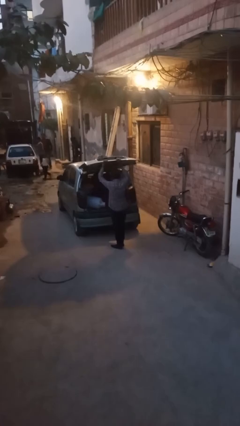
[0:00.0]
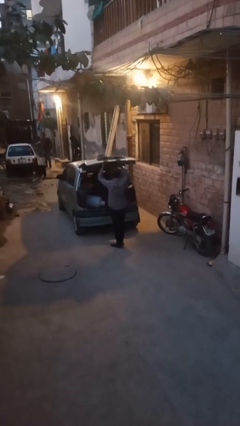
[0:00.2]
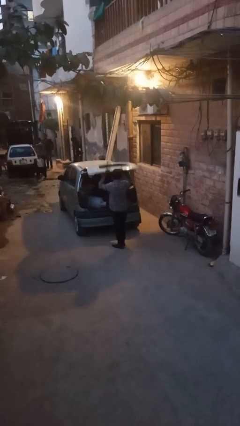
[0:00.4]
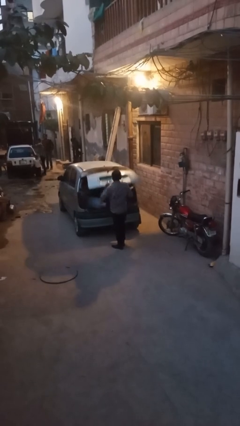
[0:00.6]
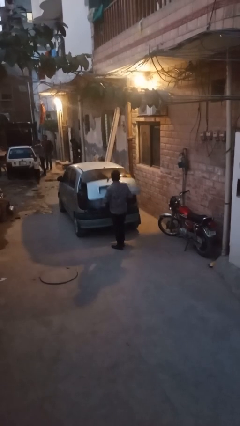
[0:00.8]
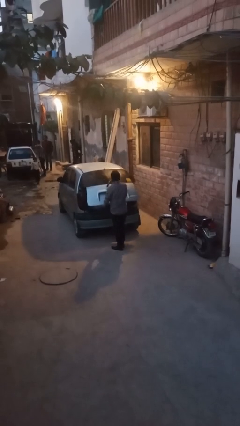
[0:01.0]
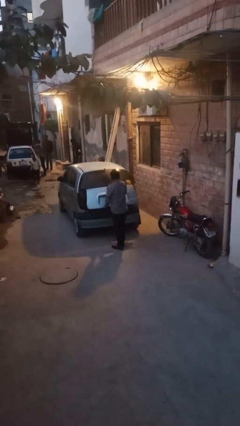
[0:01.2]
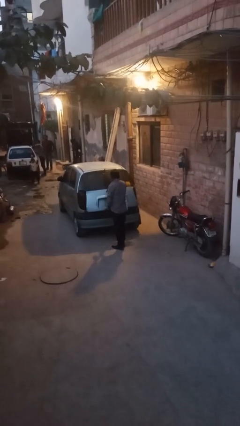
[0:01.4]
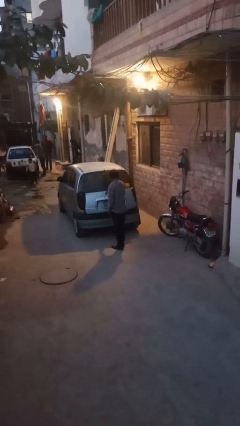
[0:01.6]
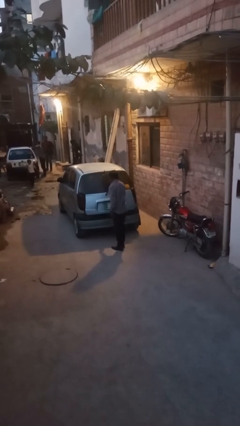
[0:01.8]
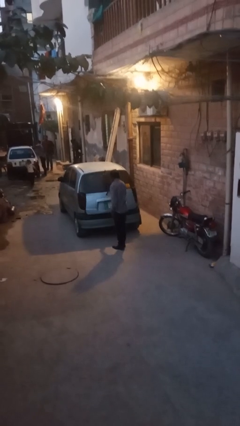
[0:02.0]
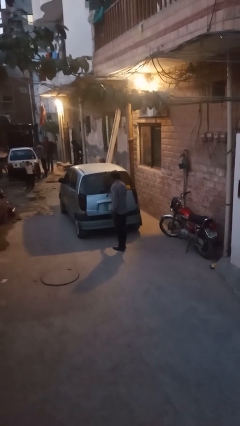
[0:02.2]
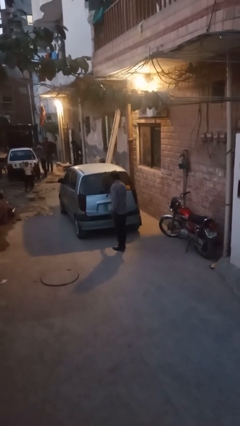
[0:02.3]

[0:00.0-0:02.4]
person closes car trunk

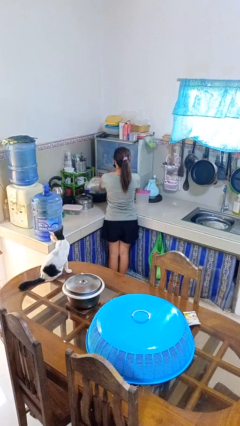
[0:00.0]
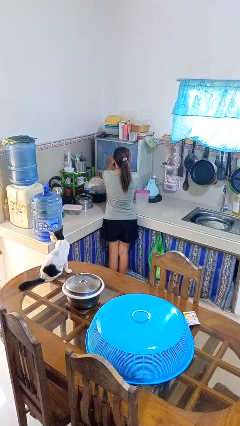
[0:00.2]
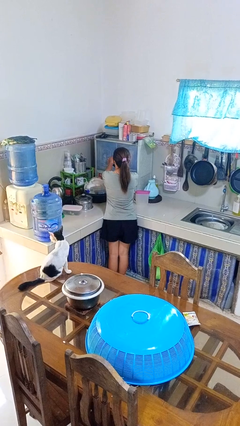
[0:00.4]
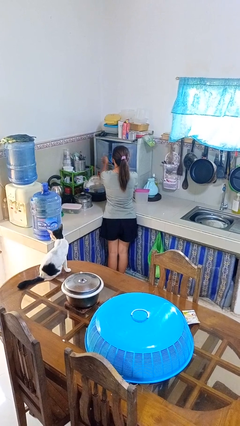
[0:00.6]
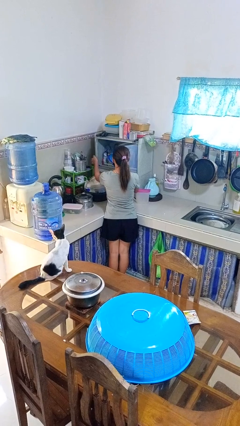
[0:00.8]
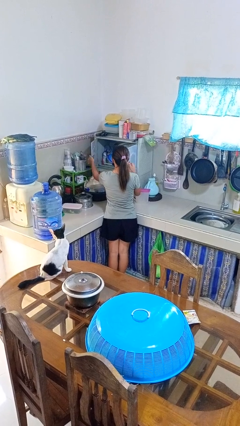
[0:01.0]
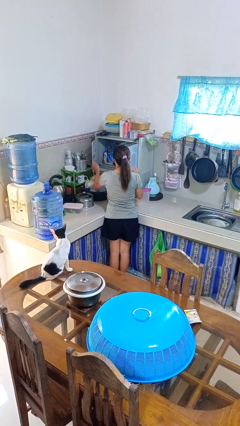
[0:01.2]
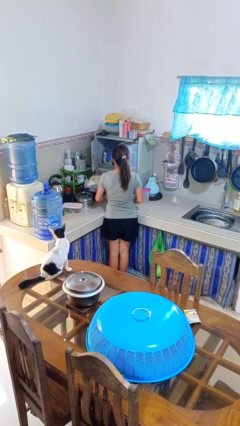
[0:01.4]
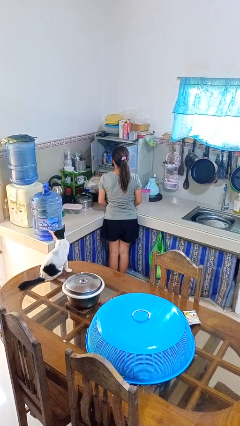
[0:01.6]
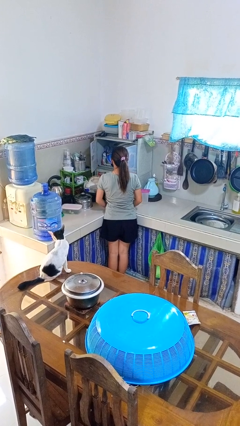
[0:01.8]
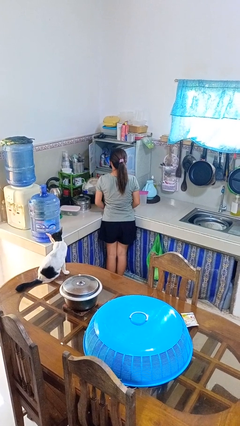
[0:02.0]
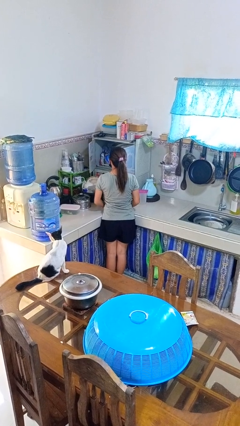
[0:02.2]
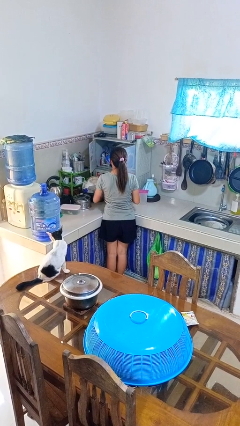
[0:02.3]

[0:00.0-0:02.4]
person opens kitchen drawer

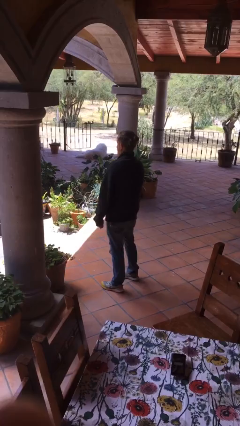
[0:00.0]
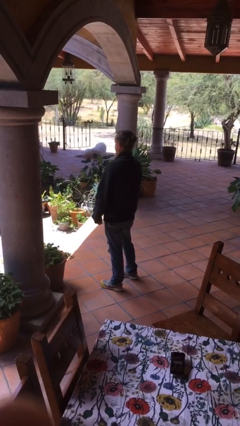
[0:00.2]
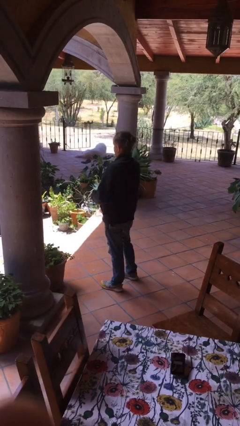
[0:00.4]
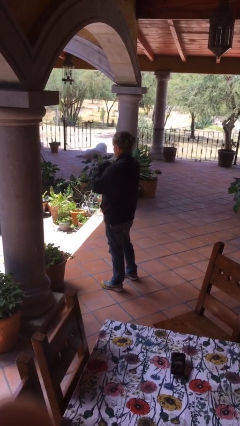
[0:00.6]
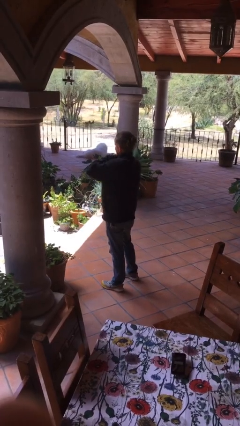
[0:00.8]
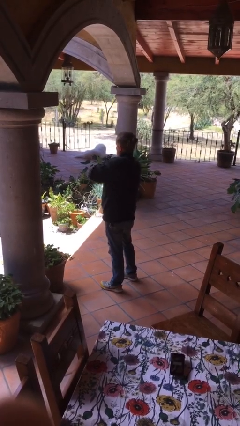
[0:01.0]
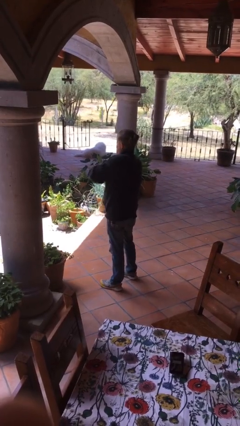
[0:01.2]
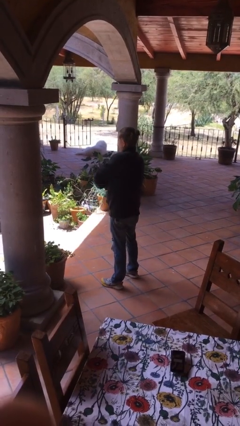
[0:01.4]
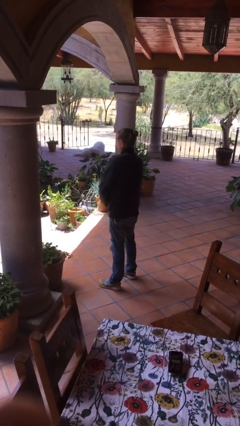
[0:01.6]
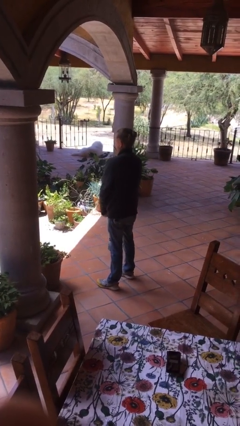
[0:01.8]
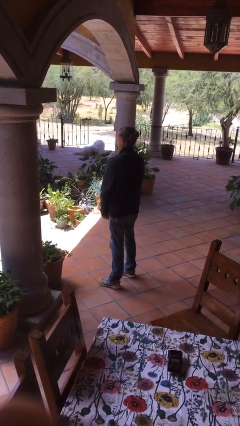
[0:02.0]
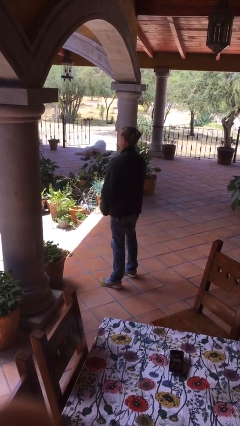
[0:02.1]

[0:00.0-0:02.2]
person unzips jacket

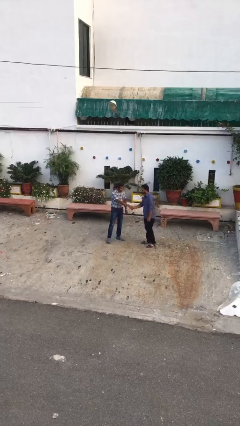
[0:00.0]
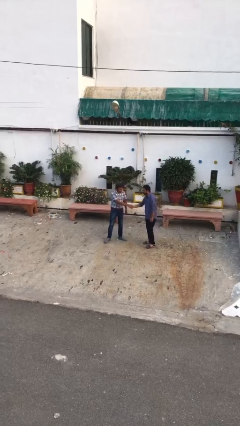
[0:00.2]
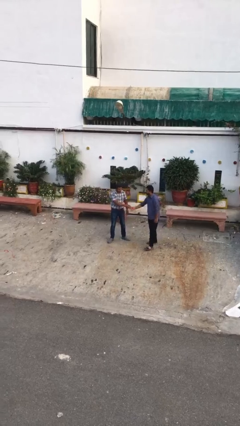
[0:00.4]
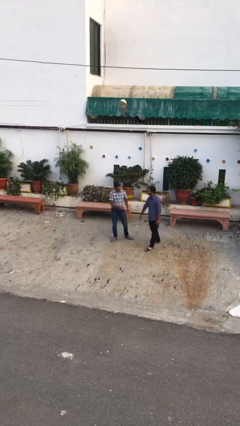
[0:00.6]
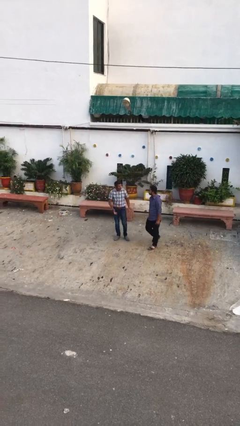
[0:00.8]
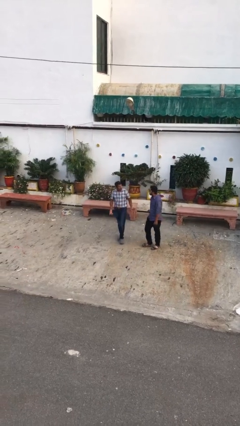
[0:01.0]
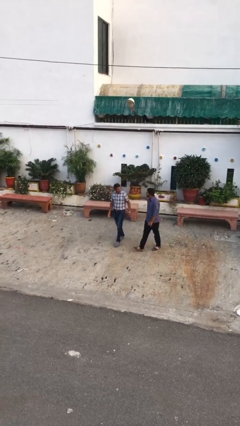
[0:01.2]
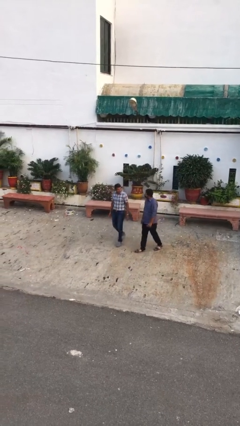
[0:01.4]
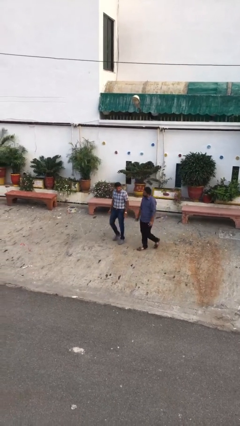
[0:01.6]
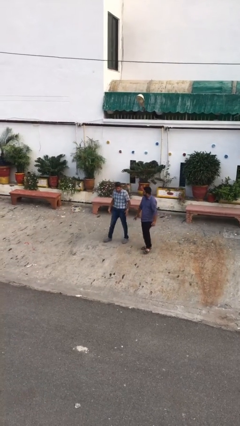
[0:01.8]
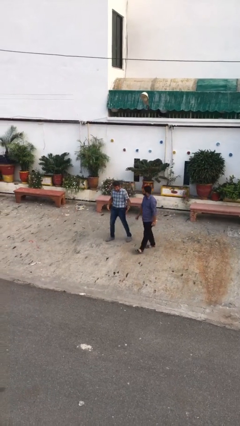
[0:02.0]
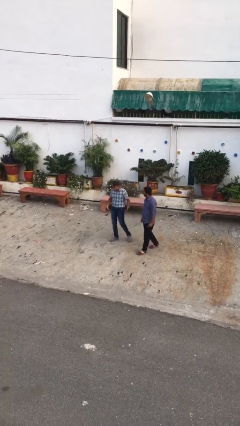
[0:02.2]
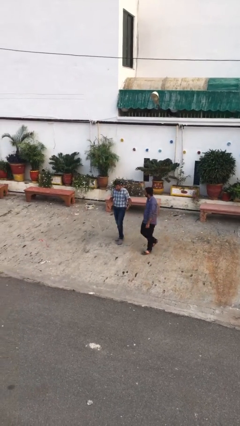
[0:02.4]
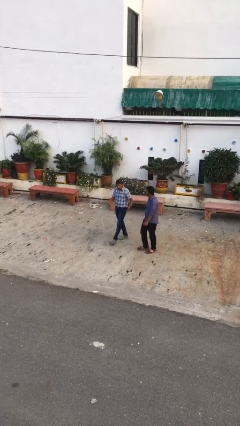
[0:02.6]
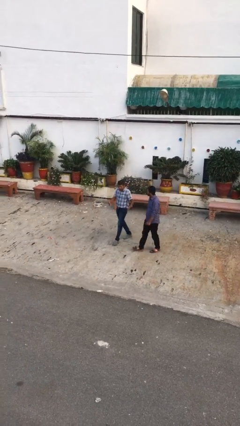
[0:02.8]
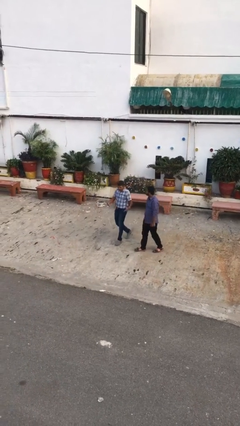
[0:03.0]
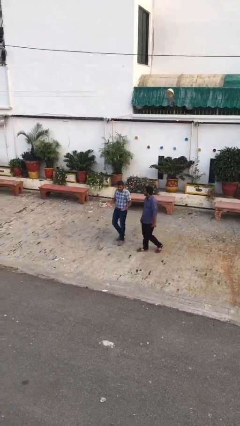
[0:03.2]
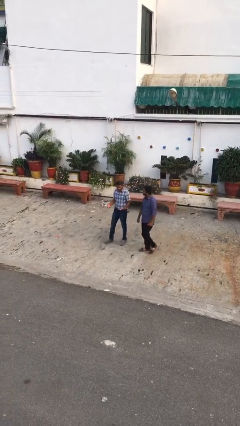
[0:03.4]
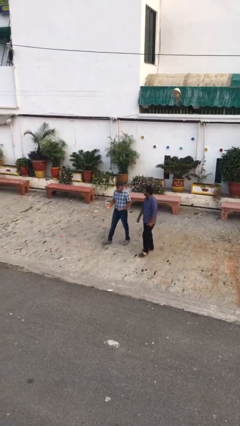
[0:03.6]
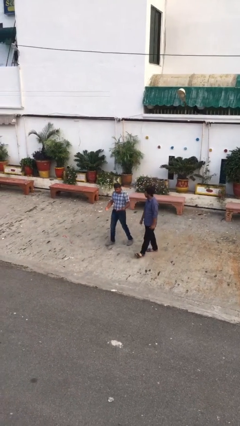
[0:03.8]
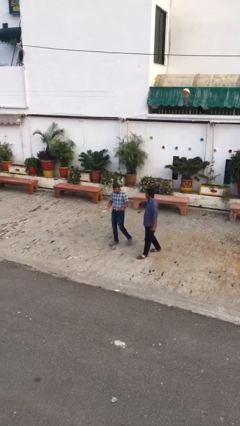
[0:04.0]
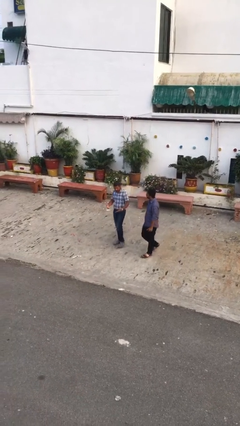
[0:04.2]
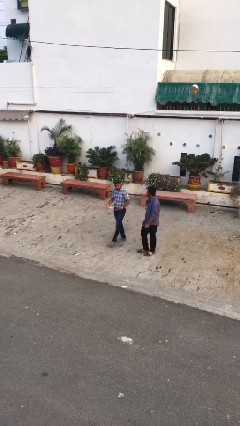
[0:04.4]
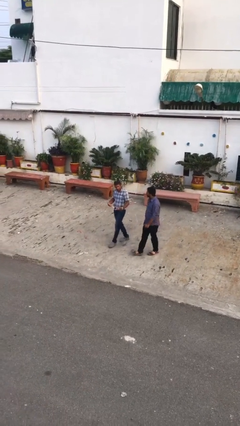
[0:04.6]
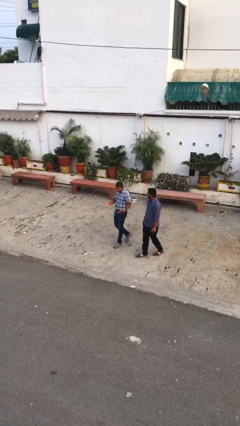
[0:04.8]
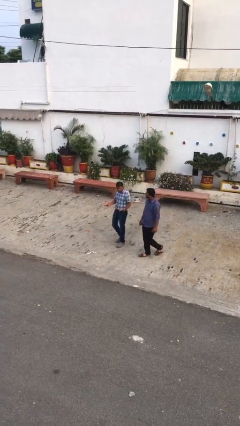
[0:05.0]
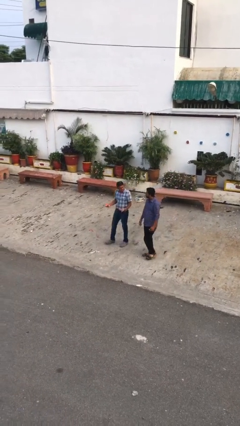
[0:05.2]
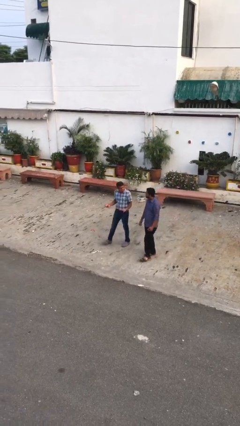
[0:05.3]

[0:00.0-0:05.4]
person talks to person

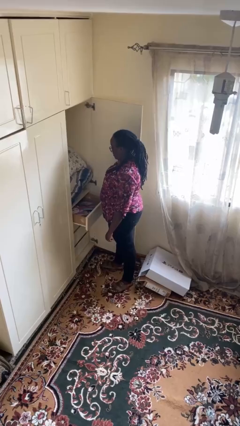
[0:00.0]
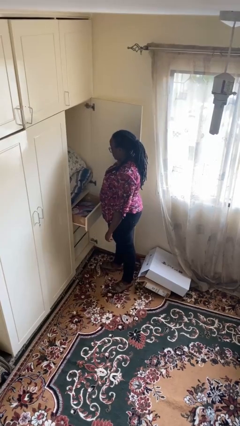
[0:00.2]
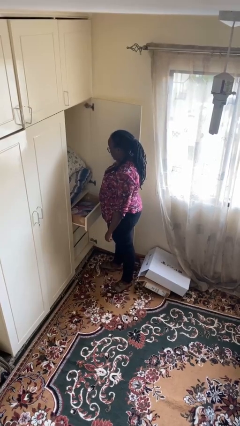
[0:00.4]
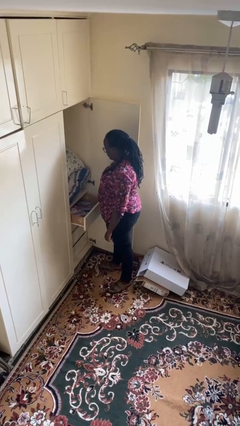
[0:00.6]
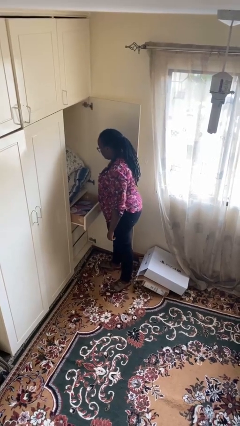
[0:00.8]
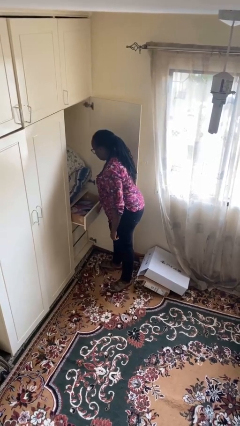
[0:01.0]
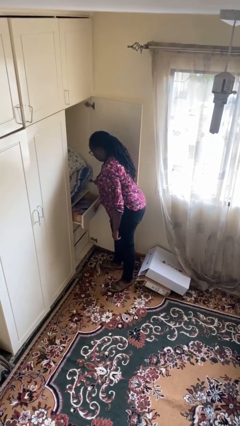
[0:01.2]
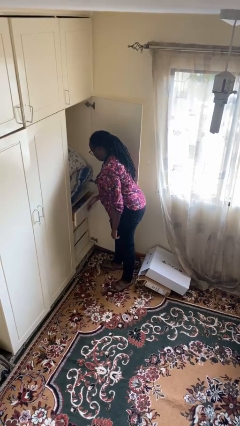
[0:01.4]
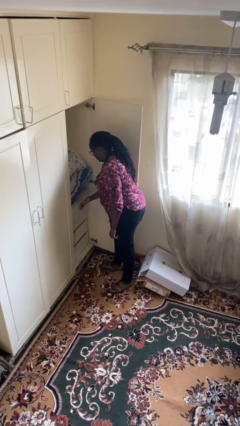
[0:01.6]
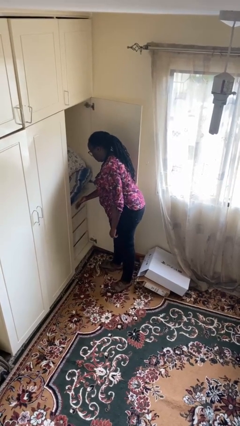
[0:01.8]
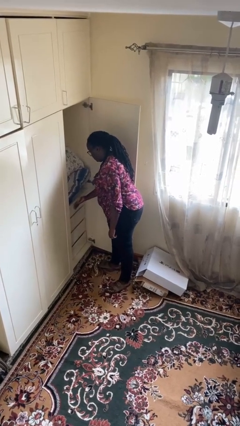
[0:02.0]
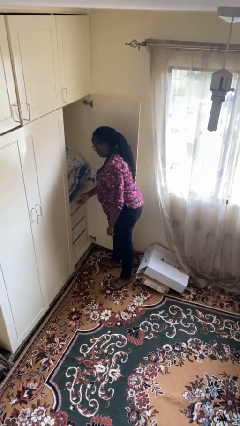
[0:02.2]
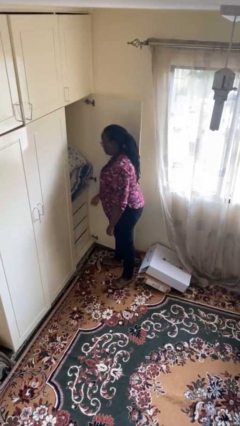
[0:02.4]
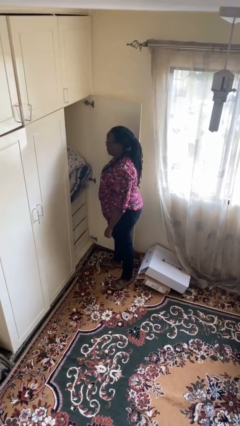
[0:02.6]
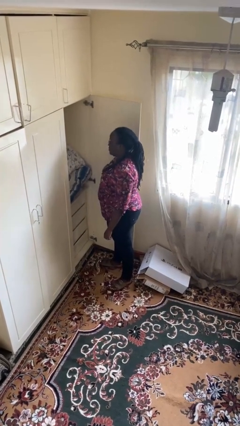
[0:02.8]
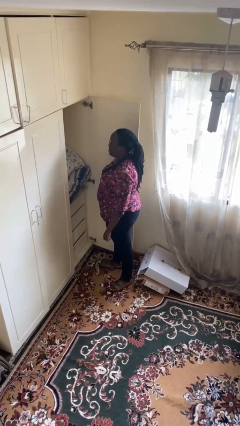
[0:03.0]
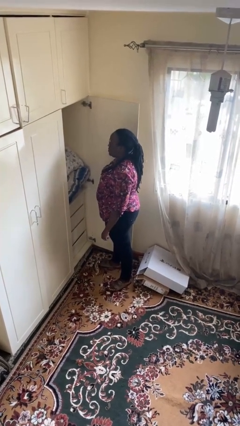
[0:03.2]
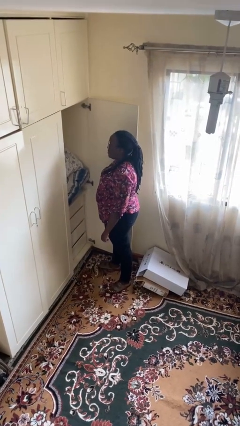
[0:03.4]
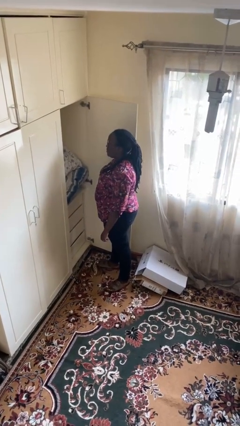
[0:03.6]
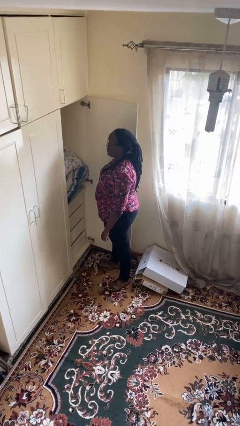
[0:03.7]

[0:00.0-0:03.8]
person closes dresser drawer

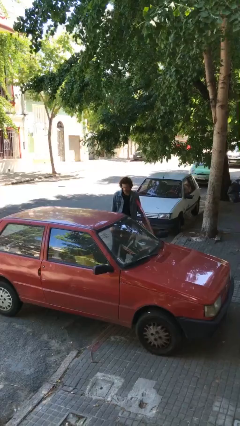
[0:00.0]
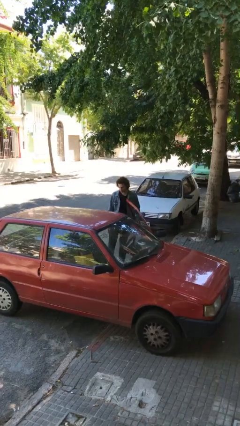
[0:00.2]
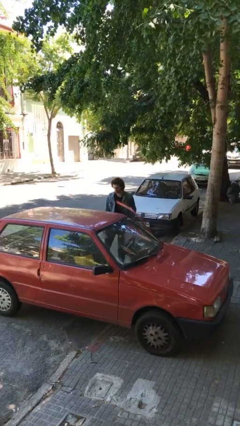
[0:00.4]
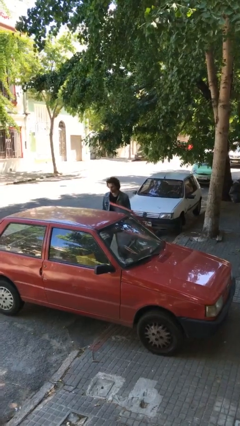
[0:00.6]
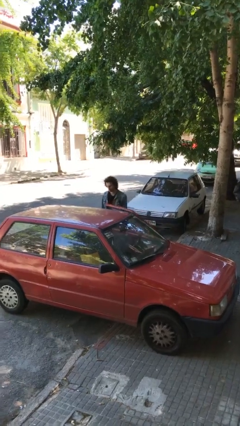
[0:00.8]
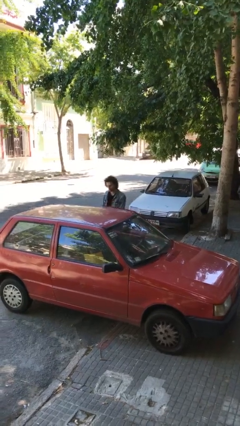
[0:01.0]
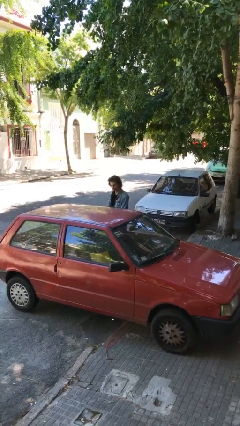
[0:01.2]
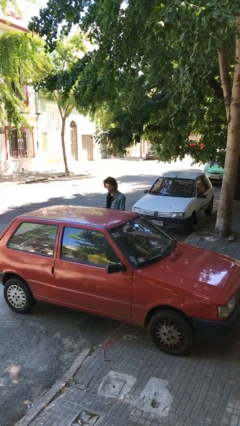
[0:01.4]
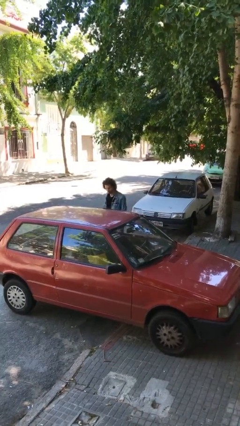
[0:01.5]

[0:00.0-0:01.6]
person closes car door
